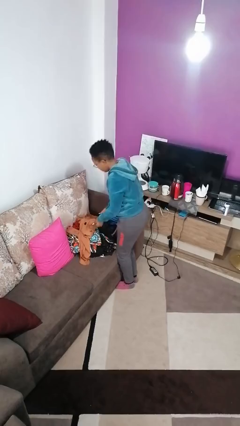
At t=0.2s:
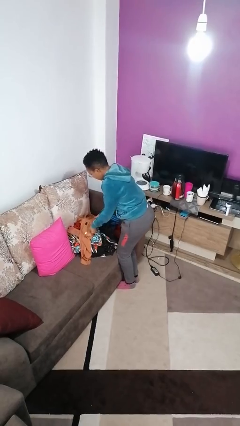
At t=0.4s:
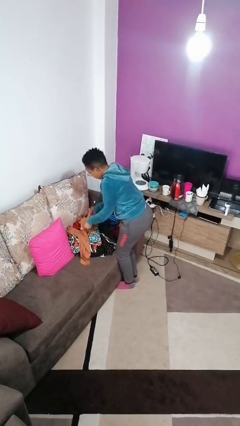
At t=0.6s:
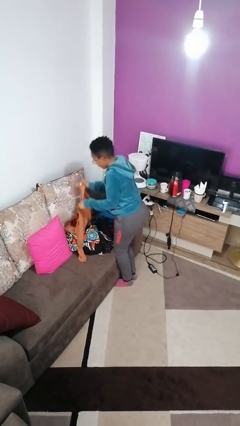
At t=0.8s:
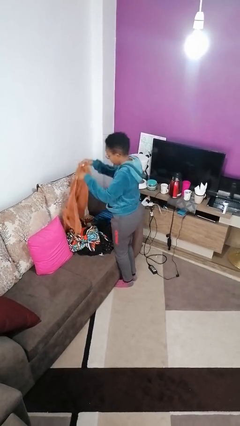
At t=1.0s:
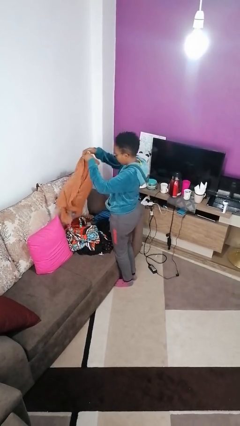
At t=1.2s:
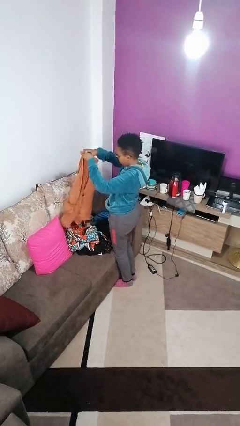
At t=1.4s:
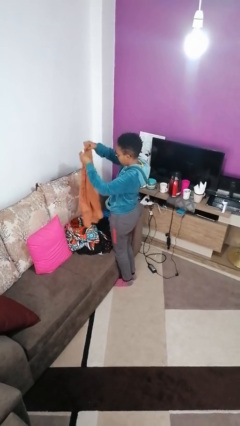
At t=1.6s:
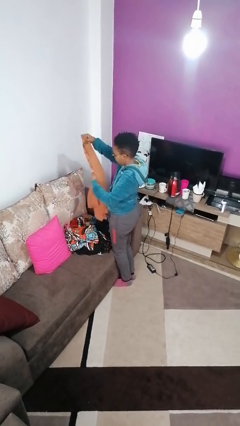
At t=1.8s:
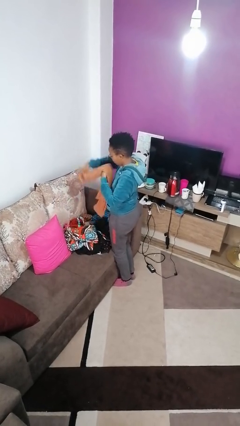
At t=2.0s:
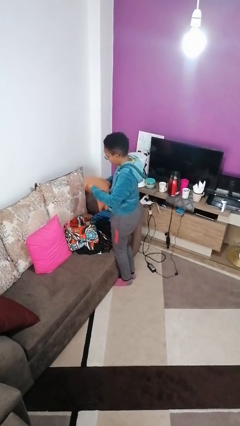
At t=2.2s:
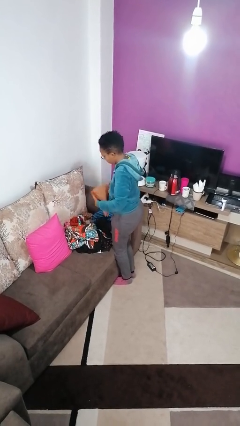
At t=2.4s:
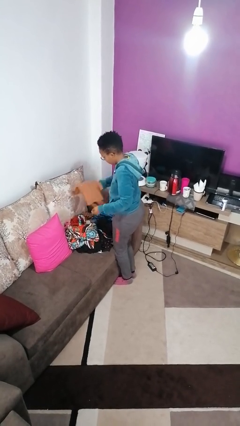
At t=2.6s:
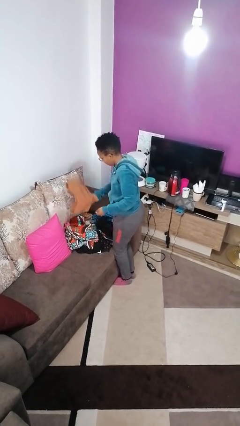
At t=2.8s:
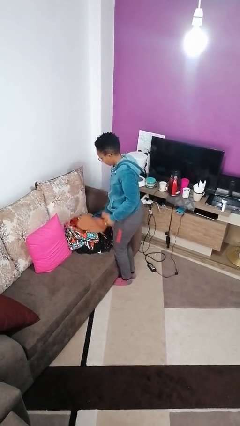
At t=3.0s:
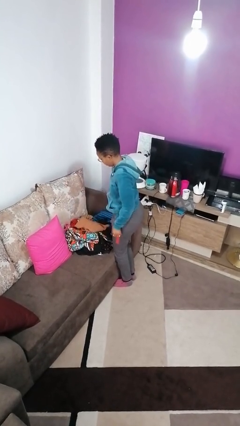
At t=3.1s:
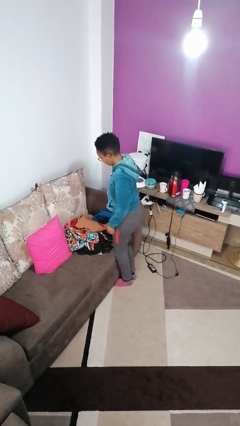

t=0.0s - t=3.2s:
person folds shirt

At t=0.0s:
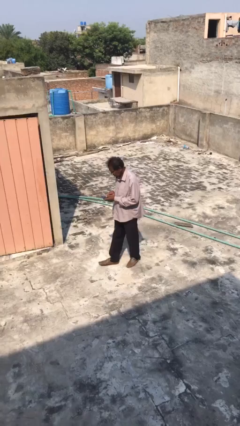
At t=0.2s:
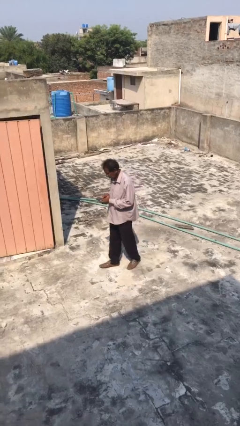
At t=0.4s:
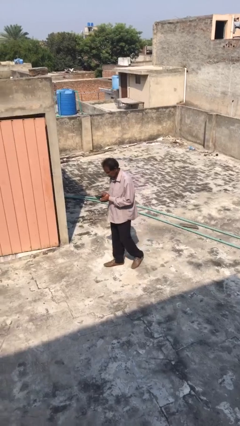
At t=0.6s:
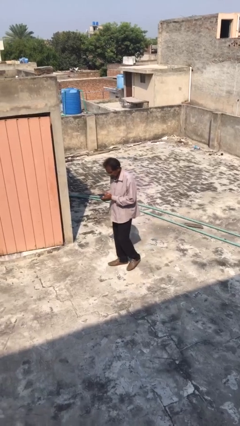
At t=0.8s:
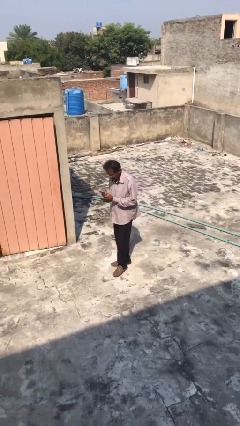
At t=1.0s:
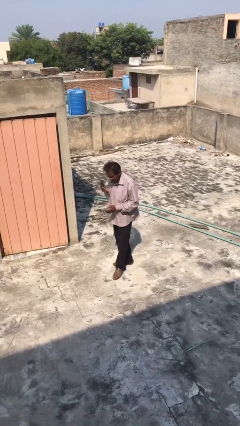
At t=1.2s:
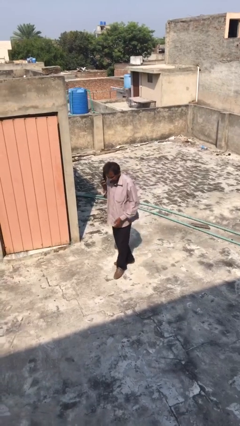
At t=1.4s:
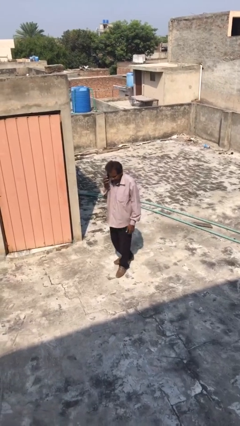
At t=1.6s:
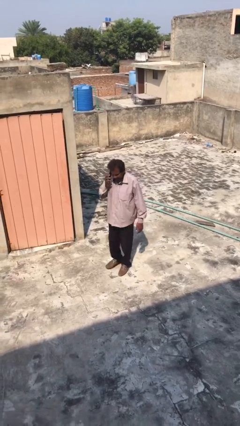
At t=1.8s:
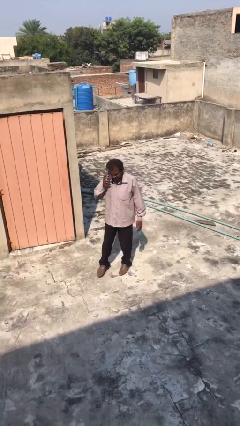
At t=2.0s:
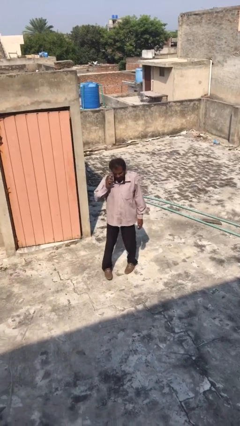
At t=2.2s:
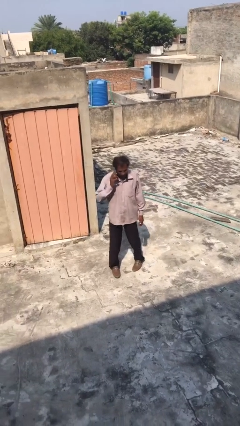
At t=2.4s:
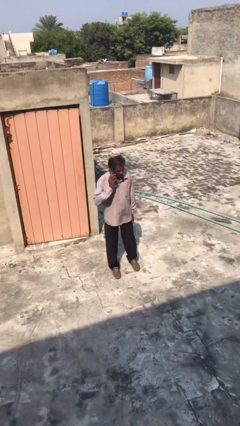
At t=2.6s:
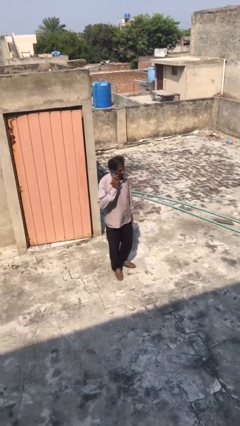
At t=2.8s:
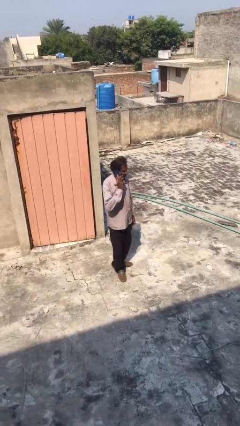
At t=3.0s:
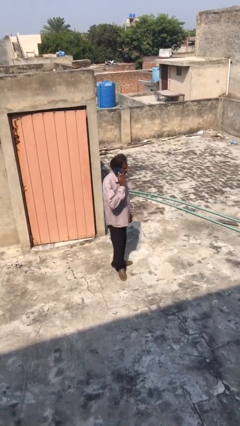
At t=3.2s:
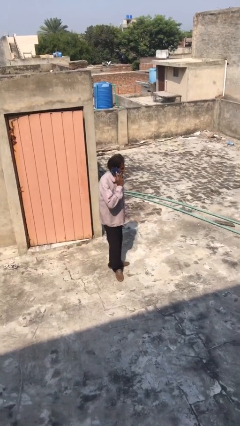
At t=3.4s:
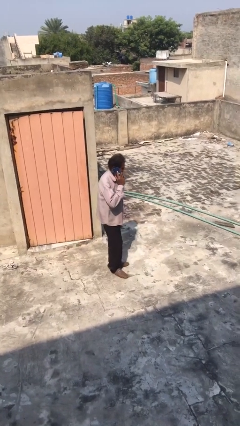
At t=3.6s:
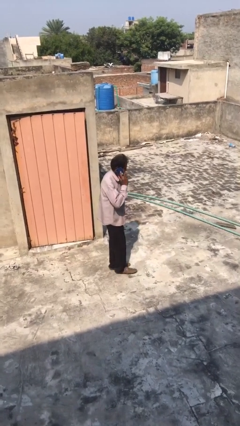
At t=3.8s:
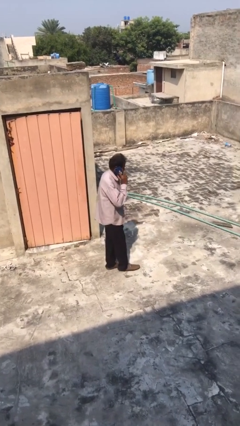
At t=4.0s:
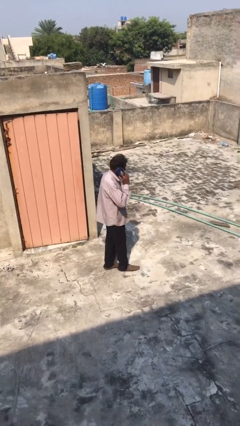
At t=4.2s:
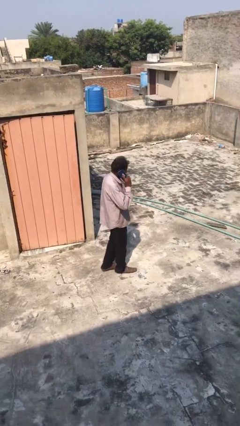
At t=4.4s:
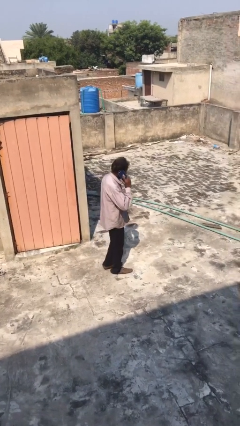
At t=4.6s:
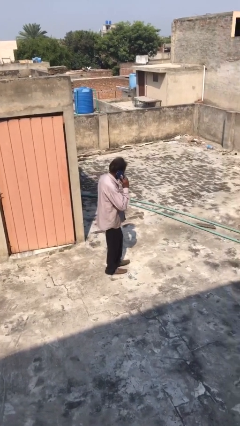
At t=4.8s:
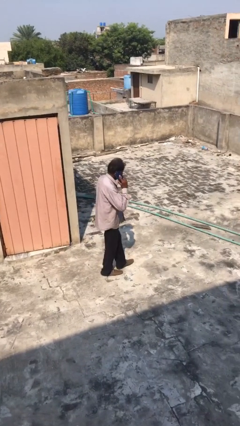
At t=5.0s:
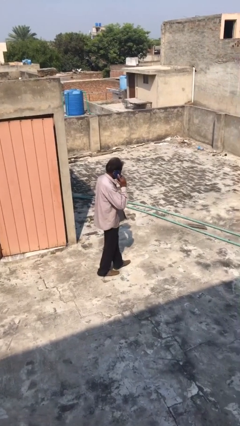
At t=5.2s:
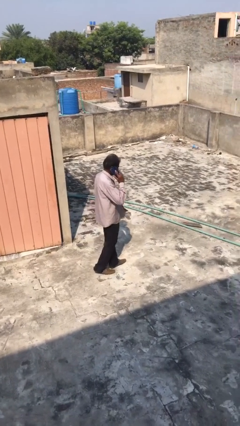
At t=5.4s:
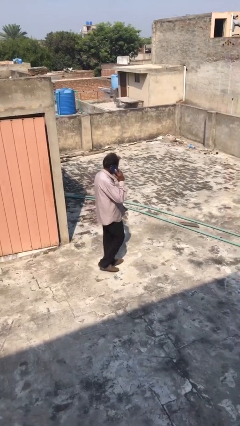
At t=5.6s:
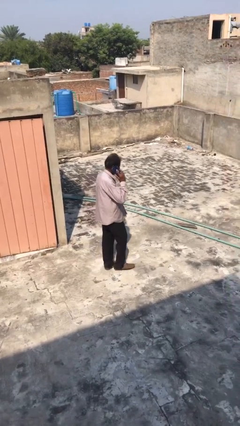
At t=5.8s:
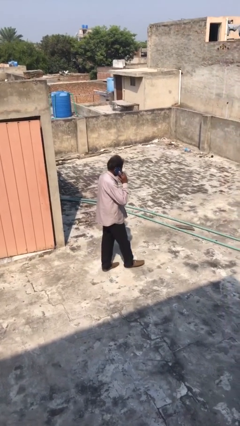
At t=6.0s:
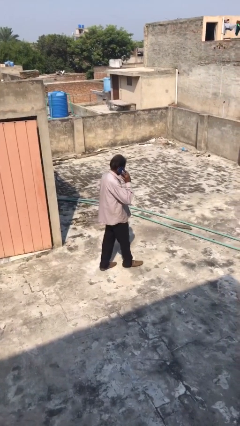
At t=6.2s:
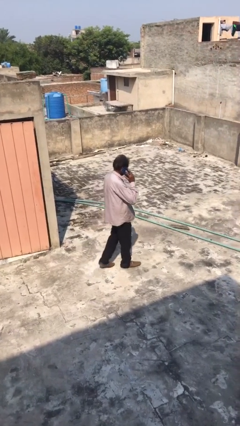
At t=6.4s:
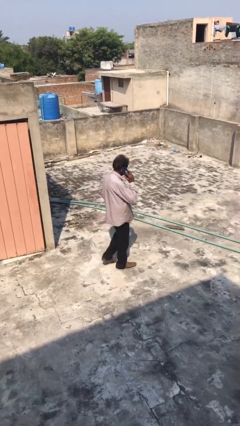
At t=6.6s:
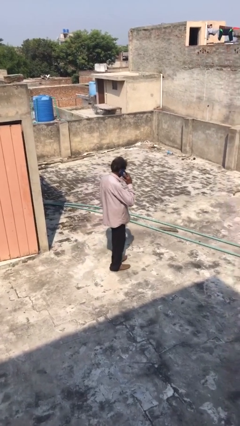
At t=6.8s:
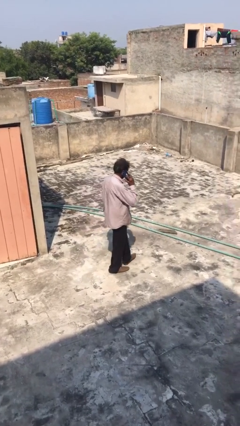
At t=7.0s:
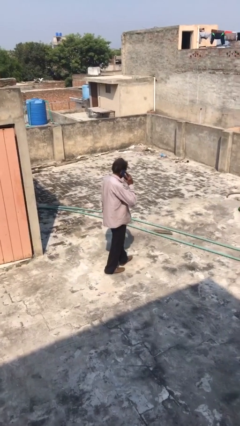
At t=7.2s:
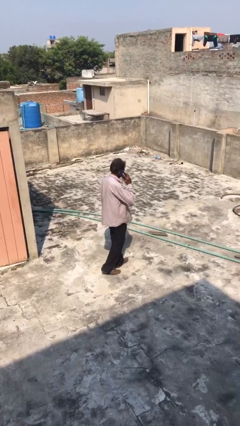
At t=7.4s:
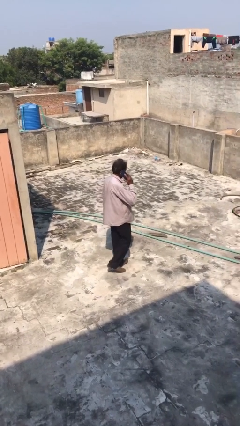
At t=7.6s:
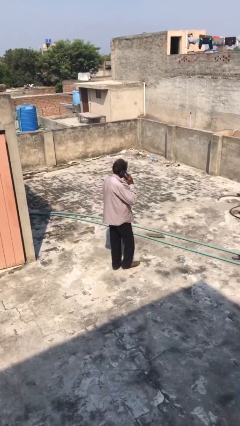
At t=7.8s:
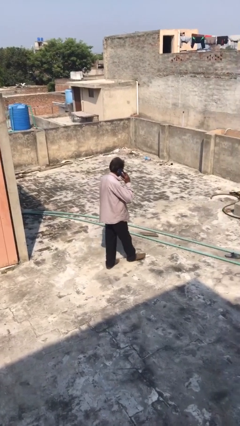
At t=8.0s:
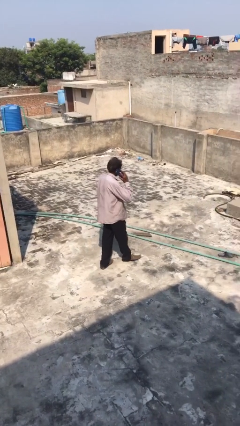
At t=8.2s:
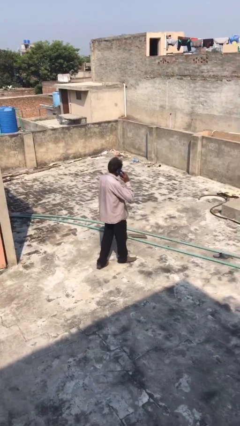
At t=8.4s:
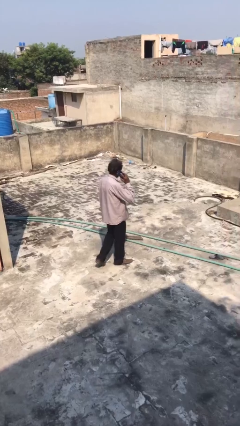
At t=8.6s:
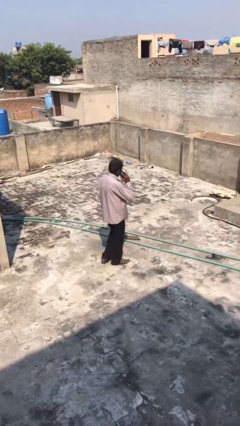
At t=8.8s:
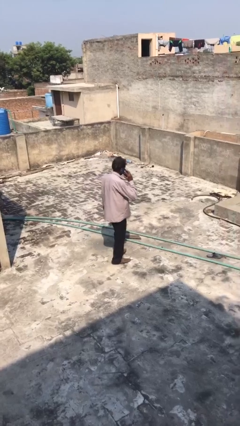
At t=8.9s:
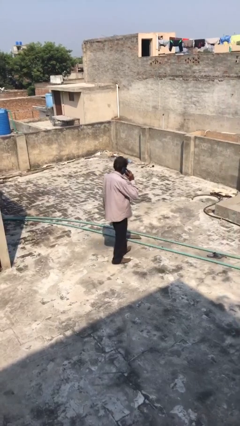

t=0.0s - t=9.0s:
person talks on phone

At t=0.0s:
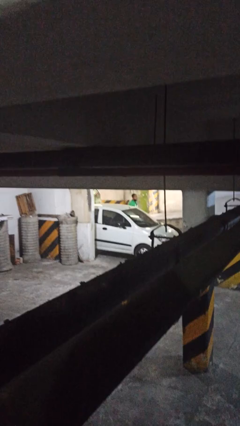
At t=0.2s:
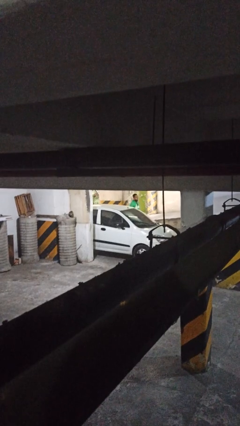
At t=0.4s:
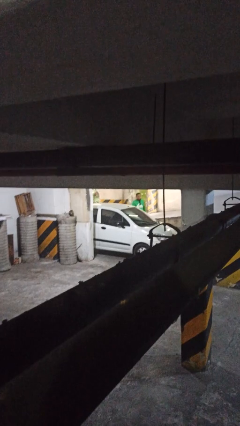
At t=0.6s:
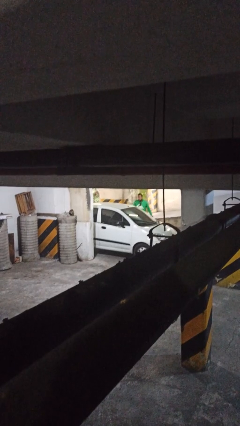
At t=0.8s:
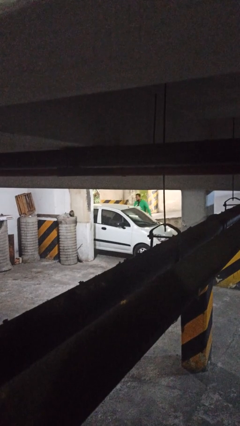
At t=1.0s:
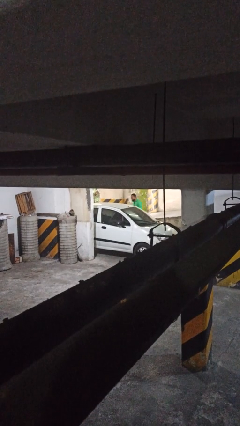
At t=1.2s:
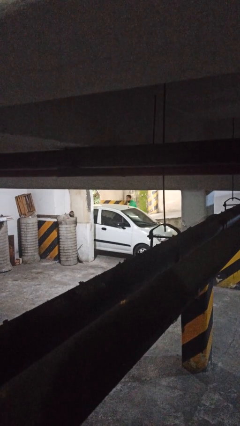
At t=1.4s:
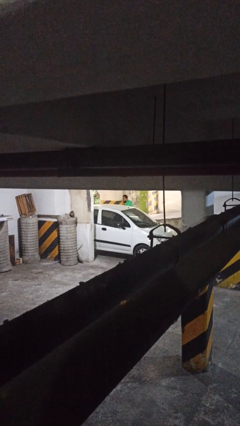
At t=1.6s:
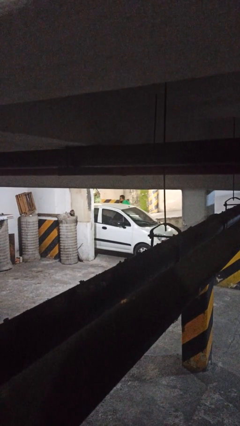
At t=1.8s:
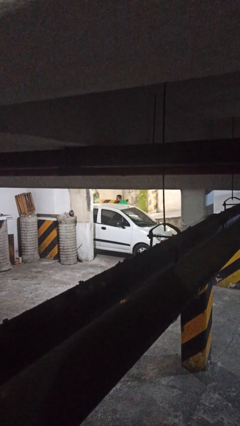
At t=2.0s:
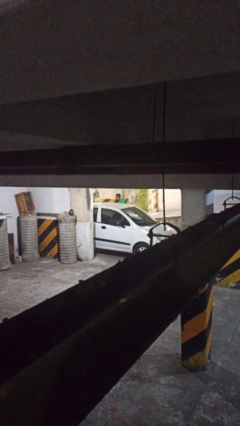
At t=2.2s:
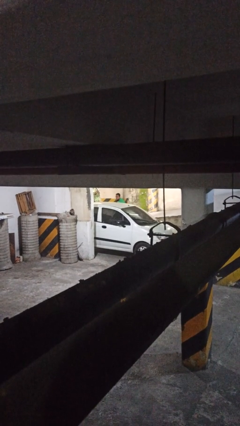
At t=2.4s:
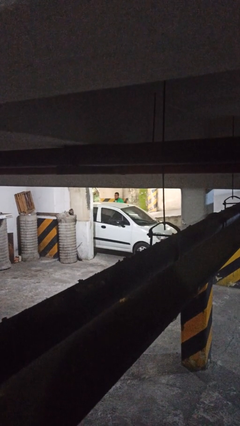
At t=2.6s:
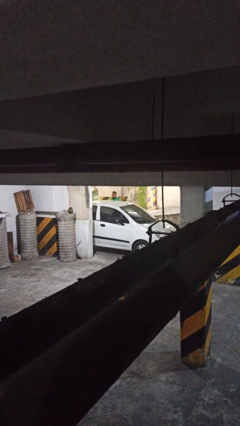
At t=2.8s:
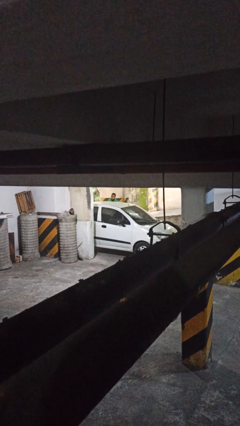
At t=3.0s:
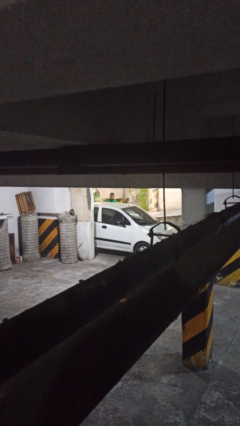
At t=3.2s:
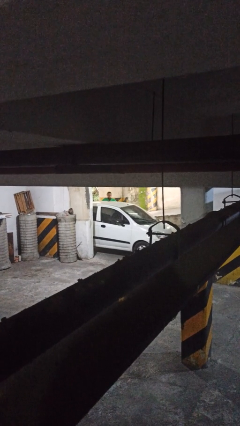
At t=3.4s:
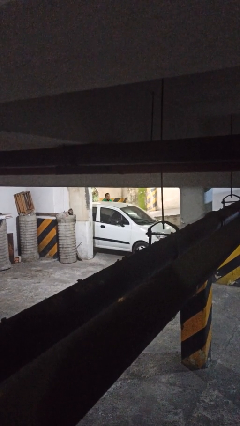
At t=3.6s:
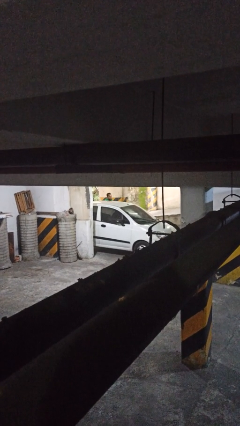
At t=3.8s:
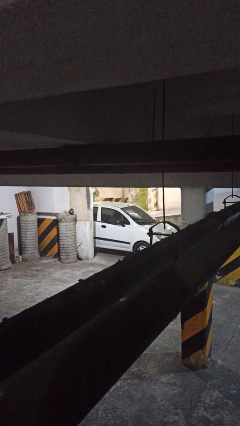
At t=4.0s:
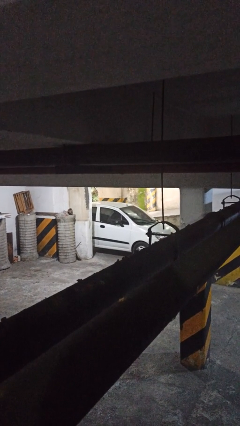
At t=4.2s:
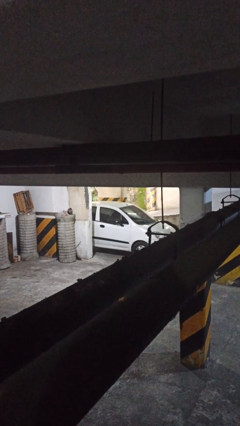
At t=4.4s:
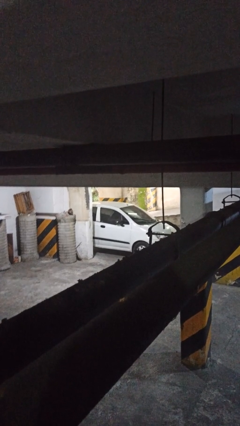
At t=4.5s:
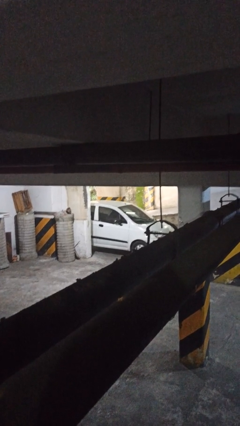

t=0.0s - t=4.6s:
car picks up person

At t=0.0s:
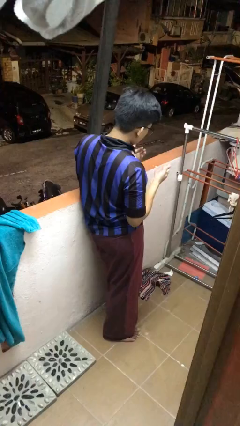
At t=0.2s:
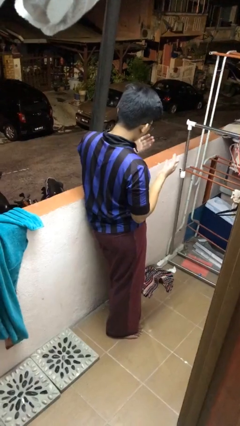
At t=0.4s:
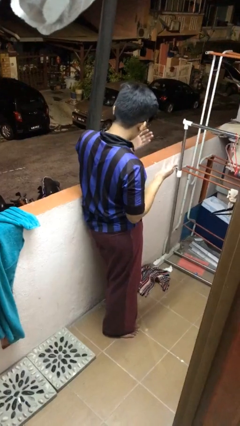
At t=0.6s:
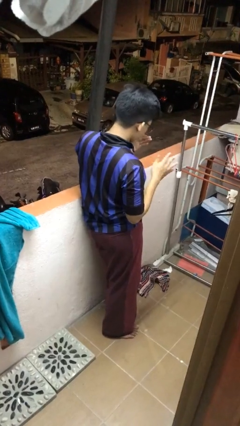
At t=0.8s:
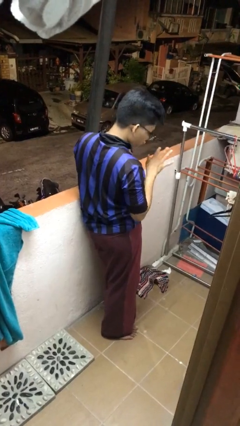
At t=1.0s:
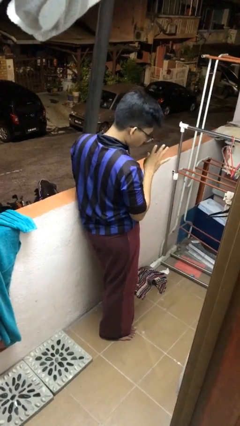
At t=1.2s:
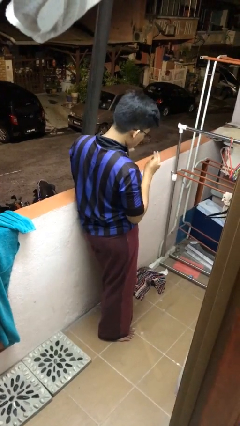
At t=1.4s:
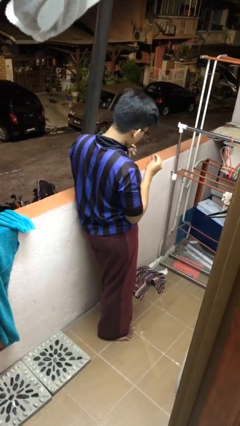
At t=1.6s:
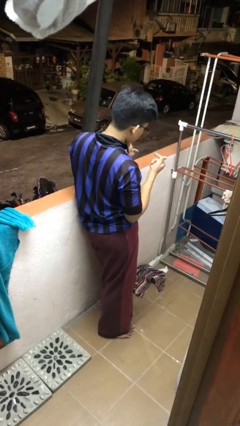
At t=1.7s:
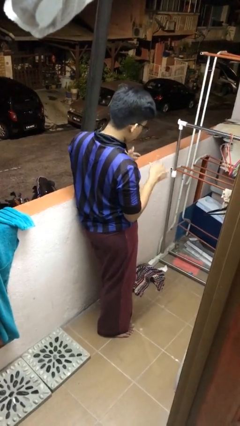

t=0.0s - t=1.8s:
person blows into hands
